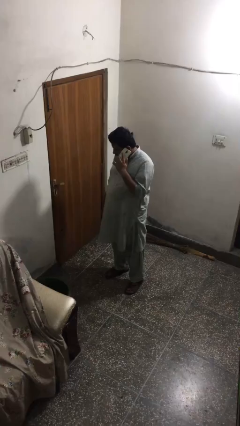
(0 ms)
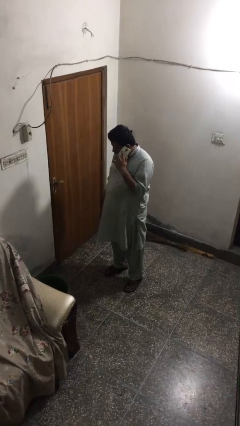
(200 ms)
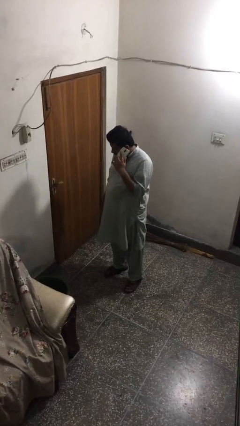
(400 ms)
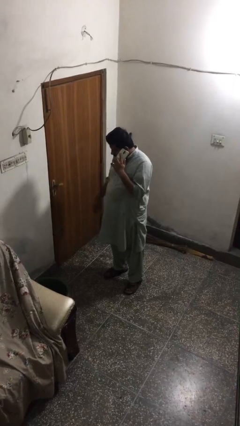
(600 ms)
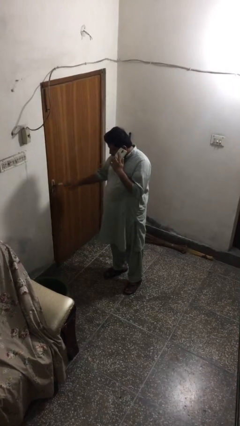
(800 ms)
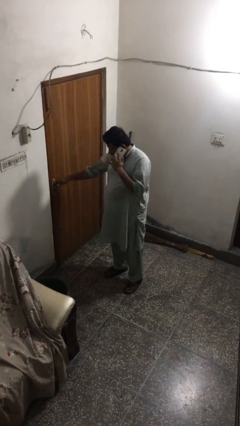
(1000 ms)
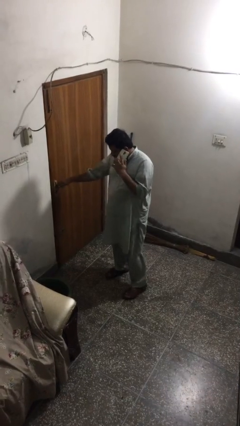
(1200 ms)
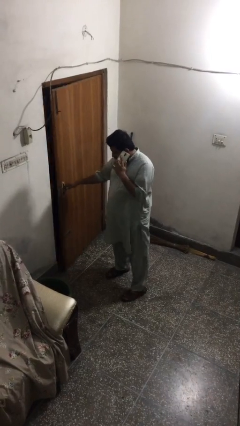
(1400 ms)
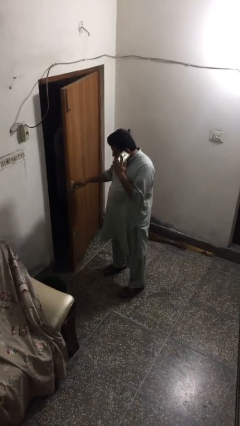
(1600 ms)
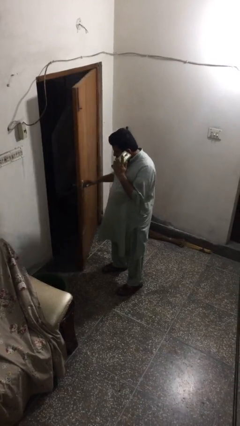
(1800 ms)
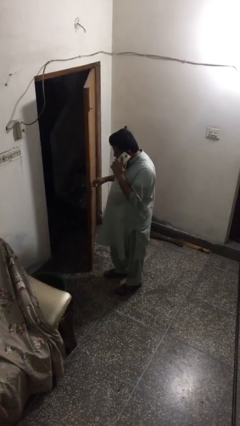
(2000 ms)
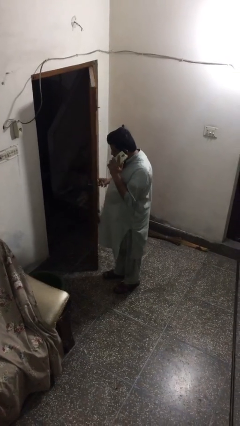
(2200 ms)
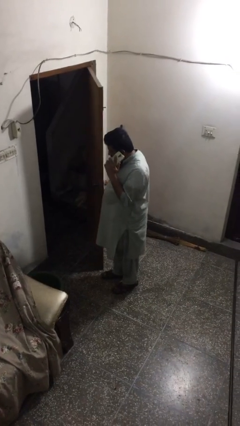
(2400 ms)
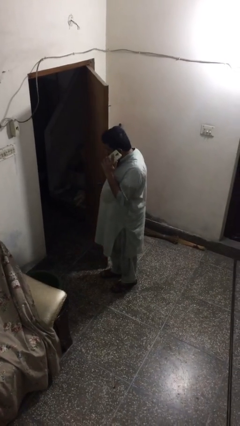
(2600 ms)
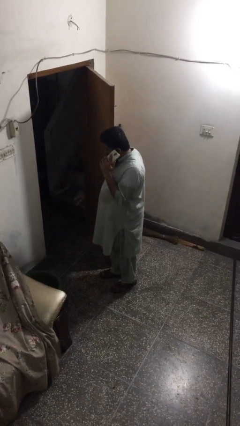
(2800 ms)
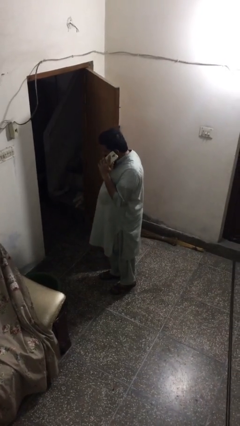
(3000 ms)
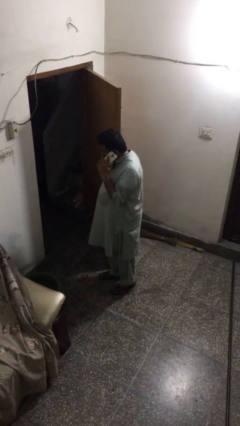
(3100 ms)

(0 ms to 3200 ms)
person opens facility door

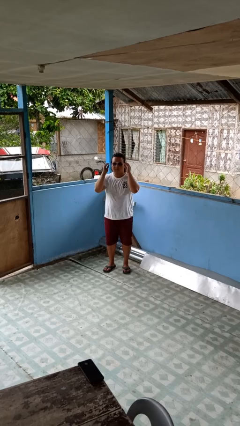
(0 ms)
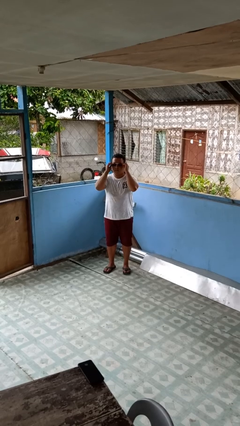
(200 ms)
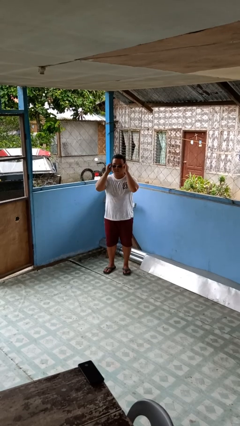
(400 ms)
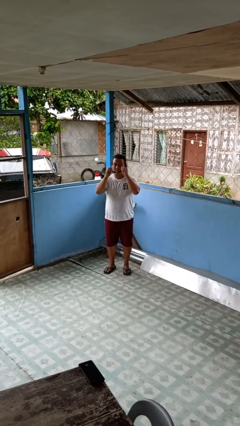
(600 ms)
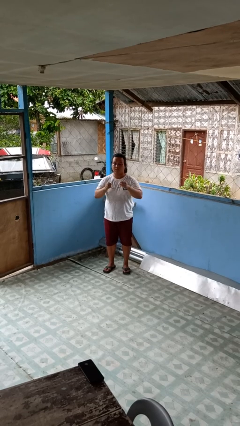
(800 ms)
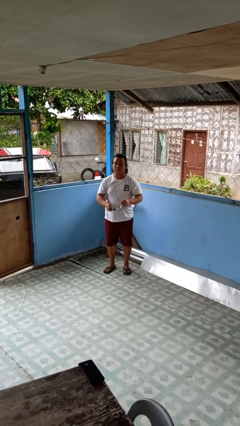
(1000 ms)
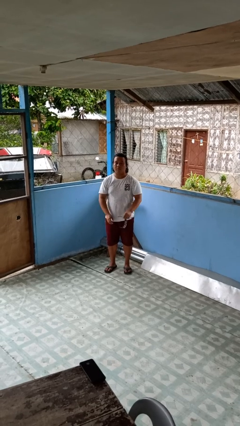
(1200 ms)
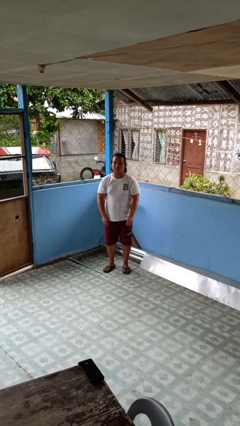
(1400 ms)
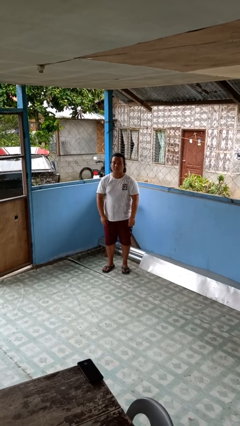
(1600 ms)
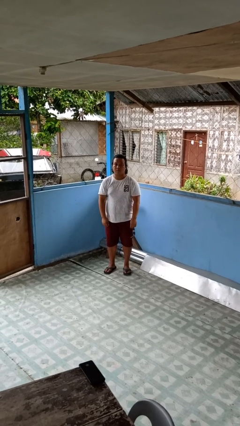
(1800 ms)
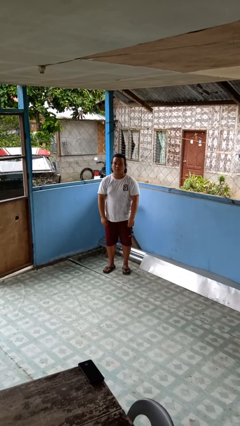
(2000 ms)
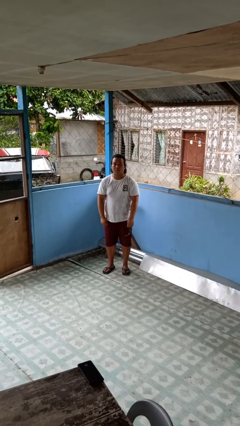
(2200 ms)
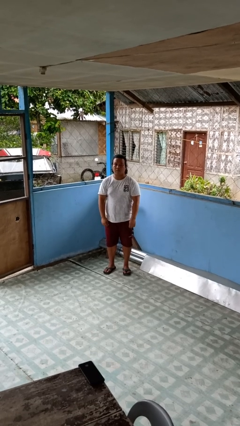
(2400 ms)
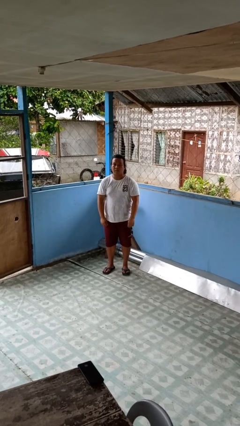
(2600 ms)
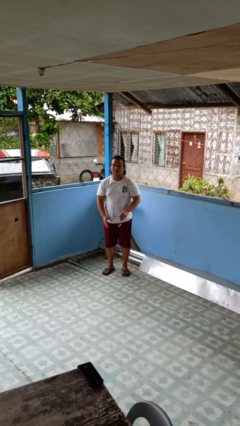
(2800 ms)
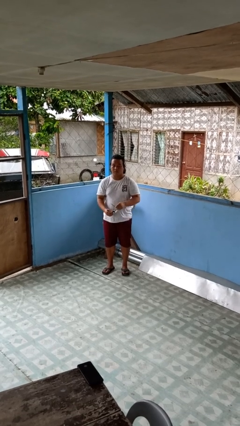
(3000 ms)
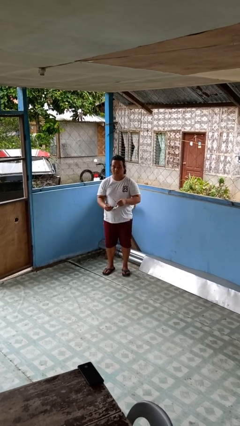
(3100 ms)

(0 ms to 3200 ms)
person takes off sunglasses

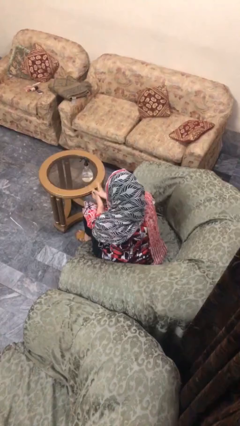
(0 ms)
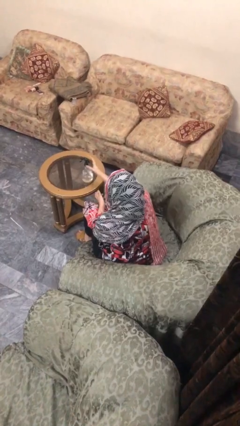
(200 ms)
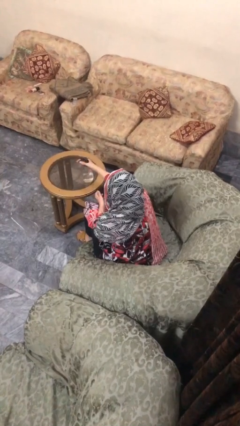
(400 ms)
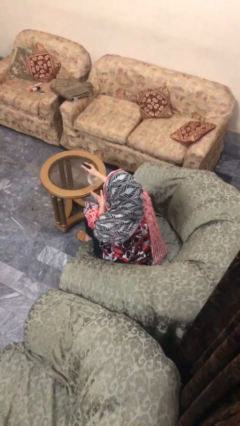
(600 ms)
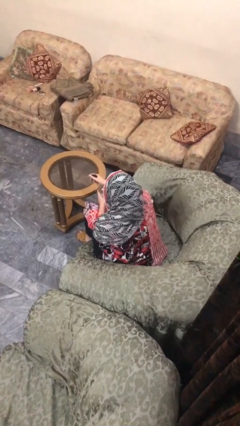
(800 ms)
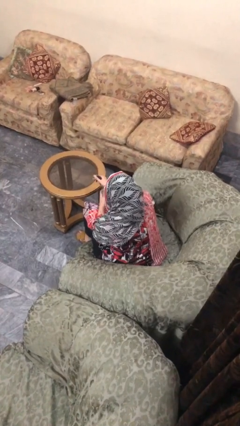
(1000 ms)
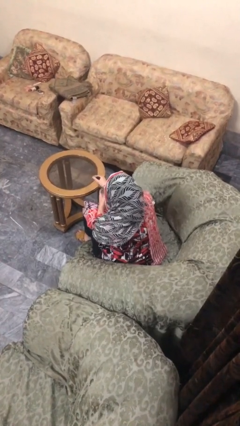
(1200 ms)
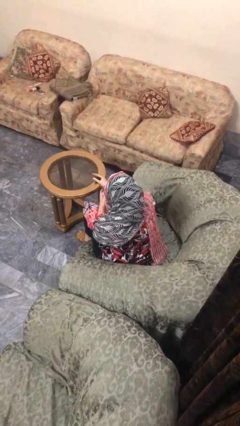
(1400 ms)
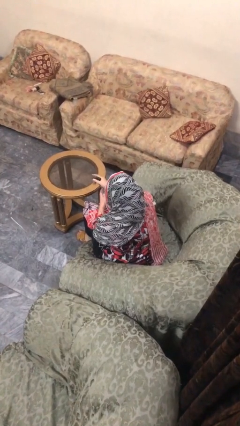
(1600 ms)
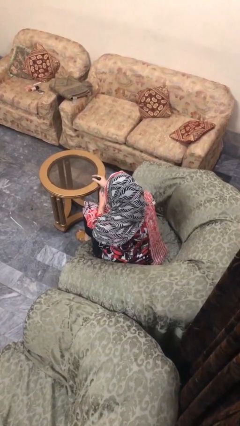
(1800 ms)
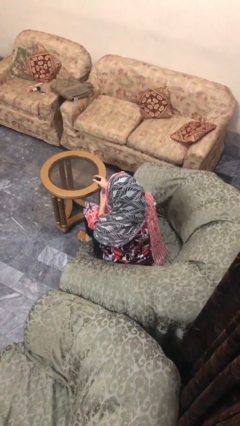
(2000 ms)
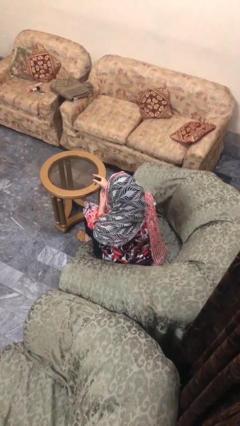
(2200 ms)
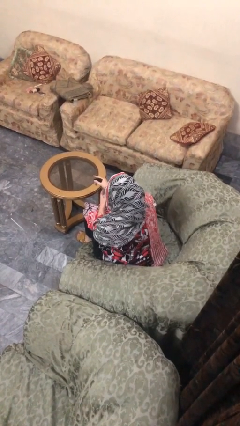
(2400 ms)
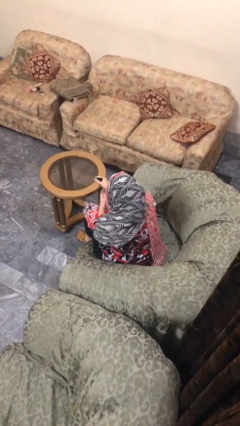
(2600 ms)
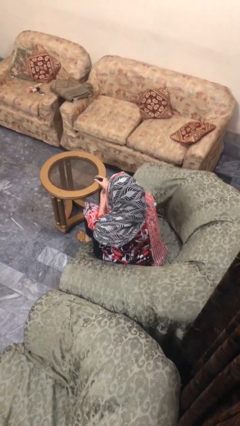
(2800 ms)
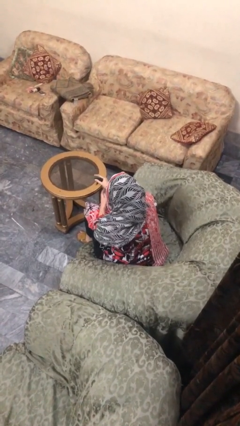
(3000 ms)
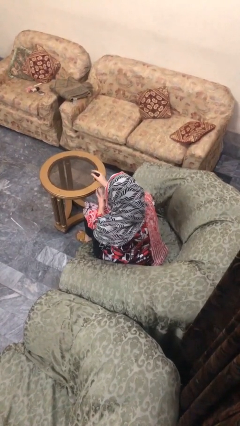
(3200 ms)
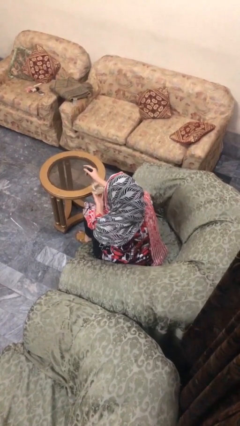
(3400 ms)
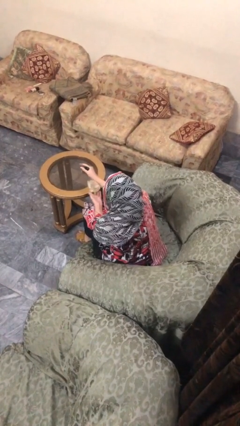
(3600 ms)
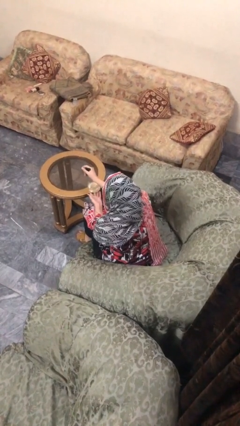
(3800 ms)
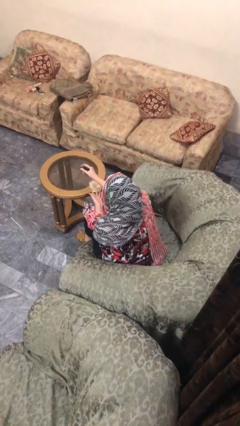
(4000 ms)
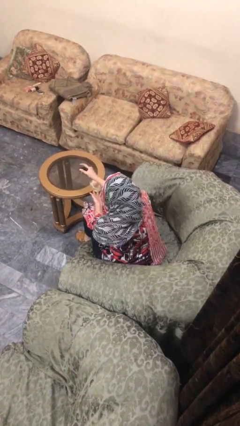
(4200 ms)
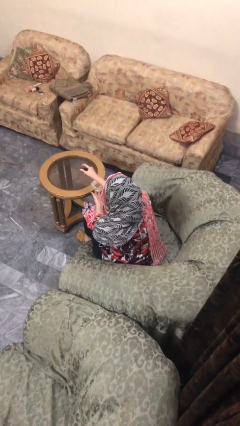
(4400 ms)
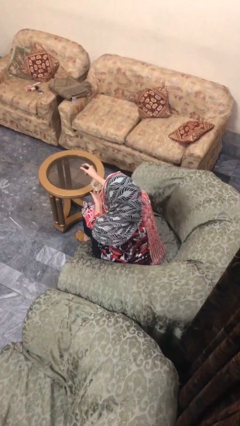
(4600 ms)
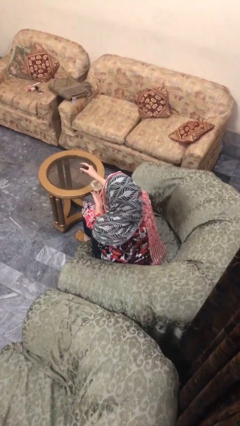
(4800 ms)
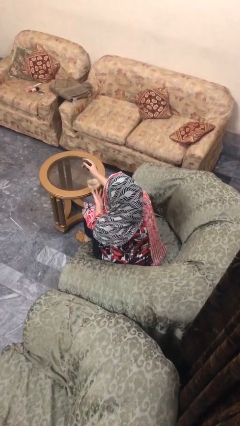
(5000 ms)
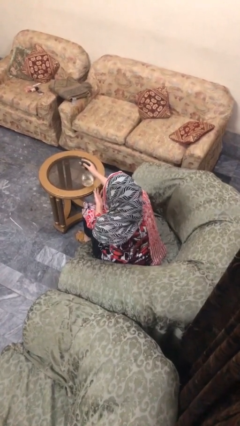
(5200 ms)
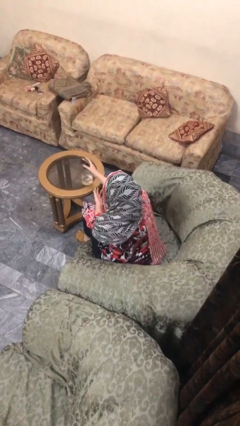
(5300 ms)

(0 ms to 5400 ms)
person sprays from bottle

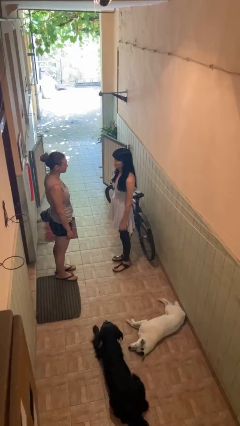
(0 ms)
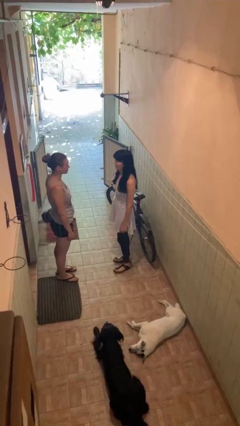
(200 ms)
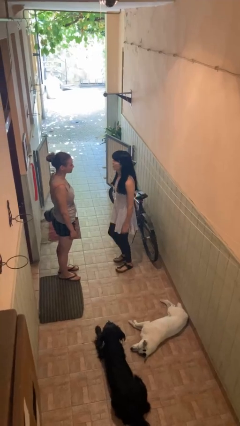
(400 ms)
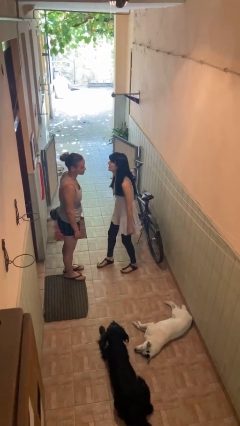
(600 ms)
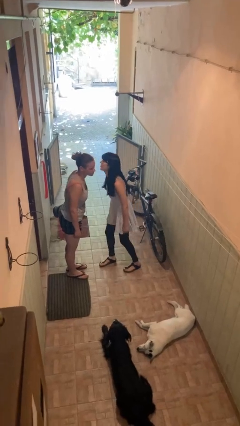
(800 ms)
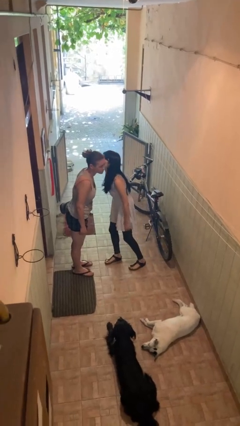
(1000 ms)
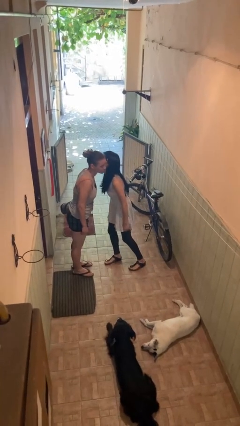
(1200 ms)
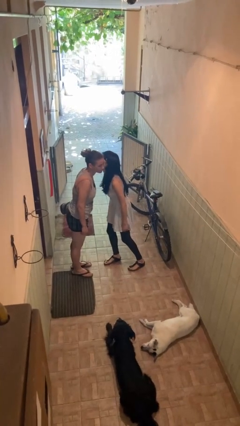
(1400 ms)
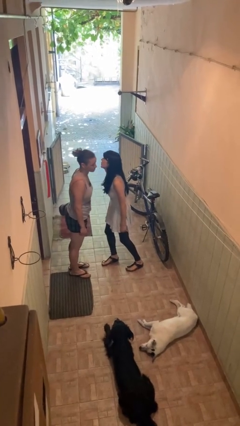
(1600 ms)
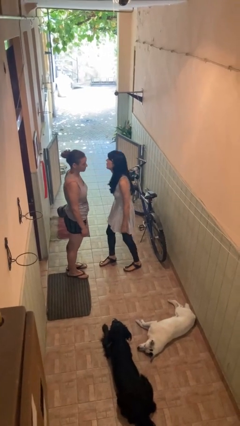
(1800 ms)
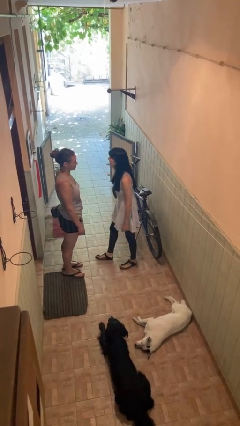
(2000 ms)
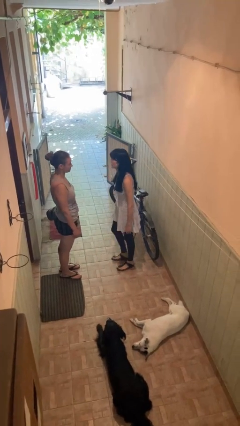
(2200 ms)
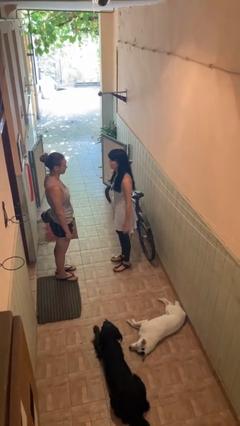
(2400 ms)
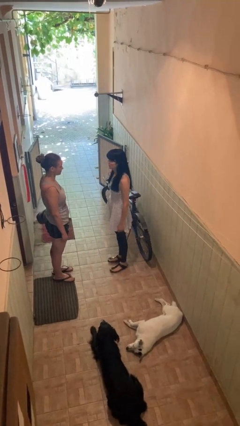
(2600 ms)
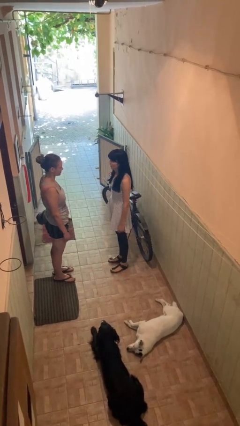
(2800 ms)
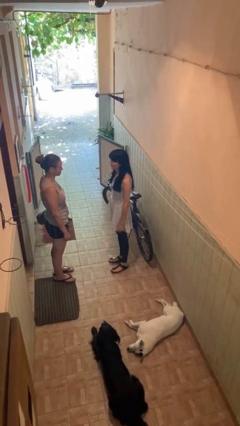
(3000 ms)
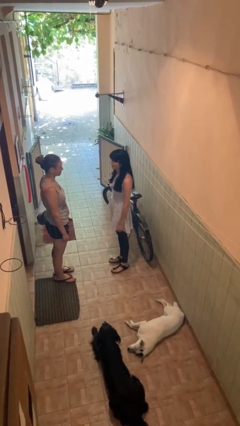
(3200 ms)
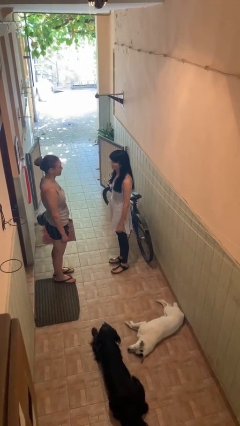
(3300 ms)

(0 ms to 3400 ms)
person kisses cheek of person

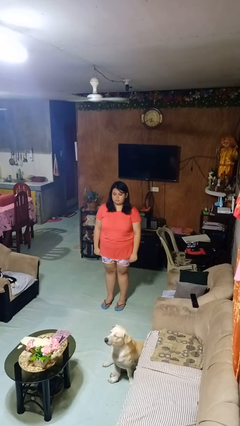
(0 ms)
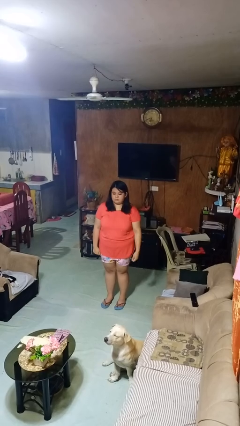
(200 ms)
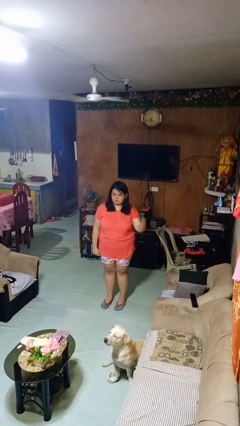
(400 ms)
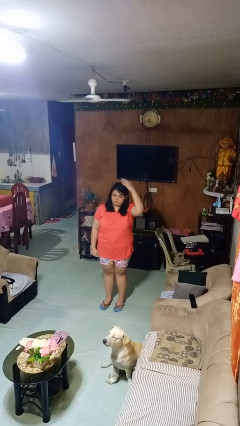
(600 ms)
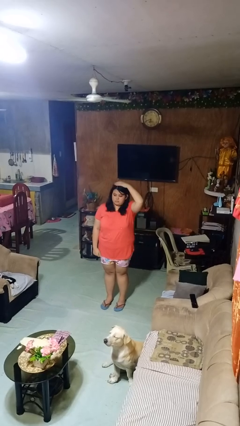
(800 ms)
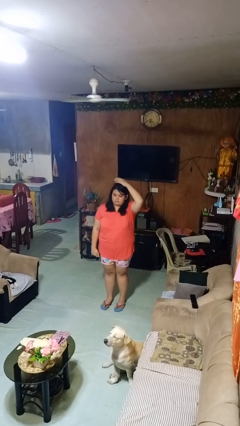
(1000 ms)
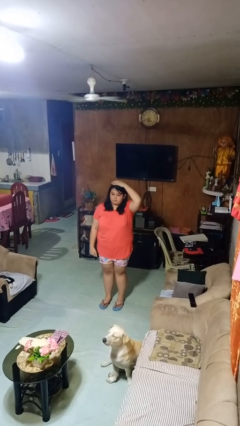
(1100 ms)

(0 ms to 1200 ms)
person pats head

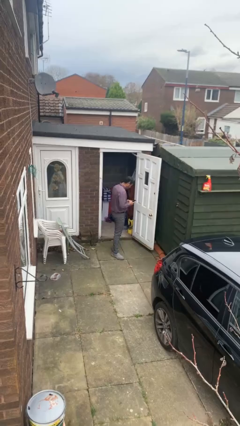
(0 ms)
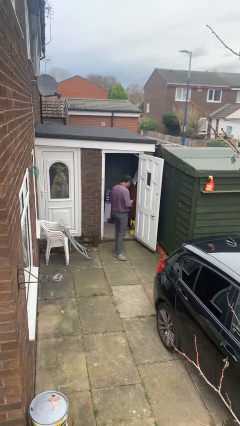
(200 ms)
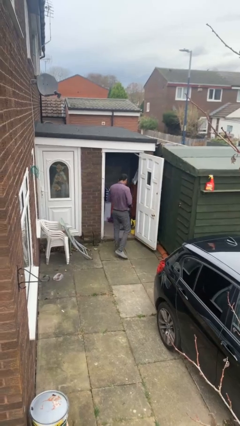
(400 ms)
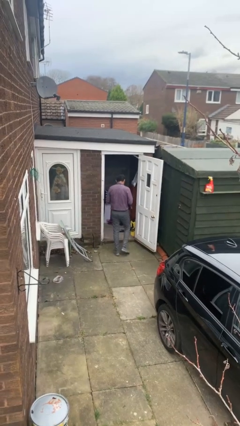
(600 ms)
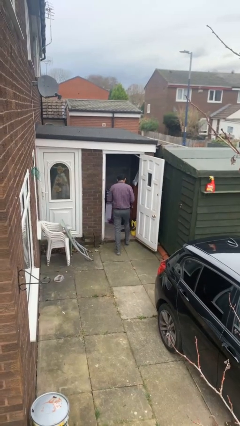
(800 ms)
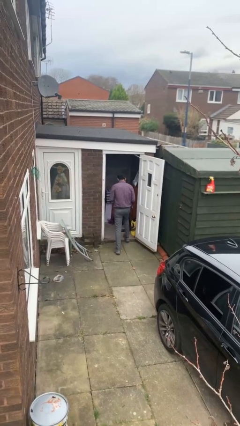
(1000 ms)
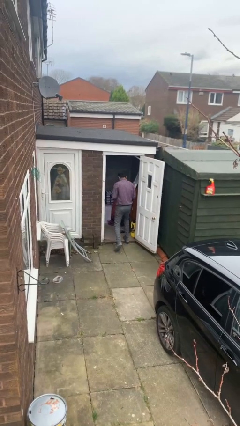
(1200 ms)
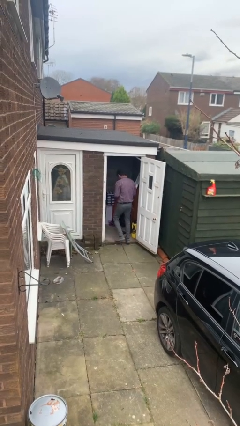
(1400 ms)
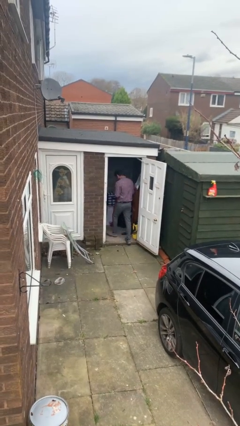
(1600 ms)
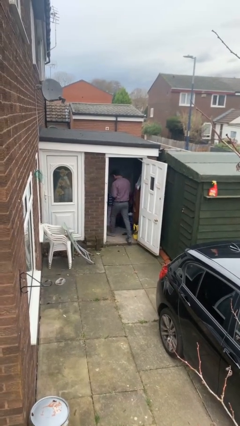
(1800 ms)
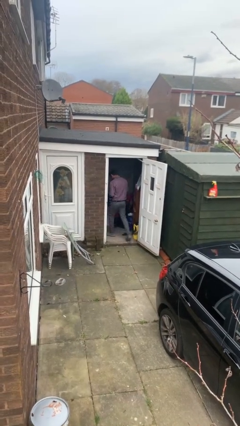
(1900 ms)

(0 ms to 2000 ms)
person exits scene through structure
